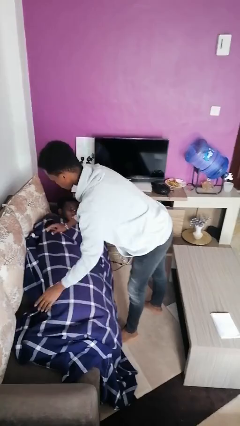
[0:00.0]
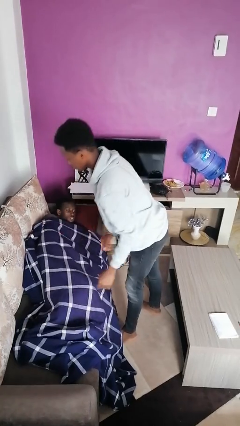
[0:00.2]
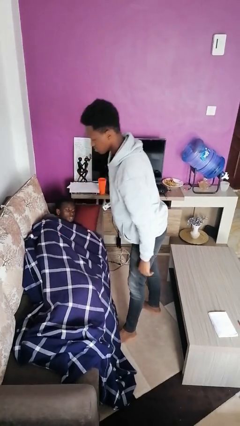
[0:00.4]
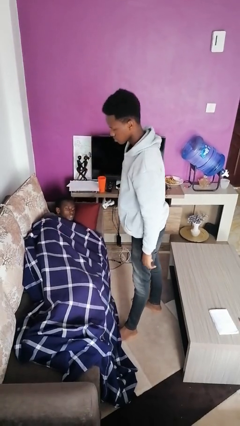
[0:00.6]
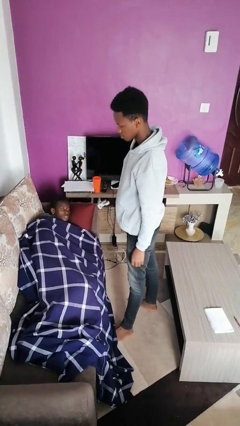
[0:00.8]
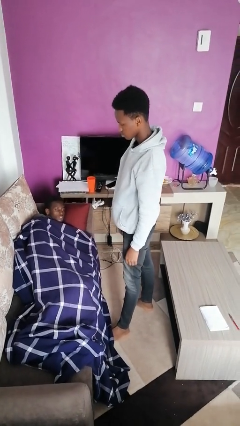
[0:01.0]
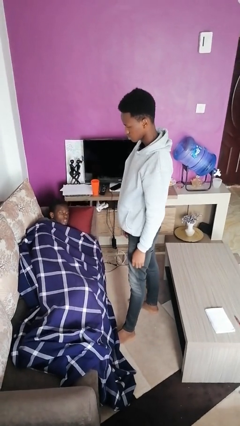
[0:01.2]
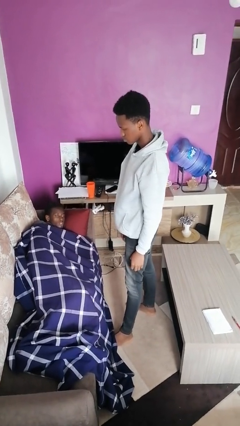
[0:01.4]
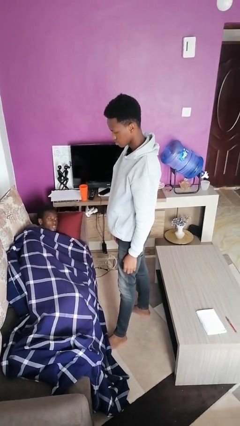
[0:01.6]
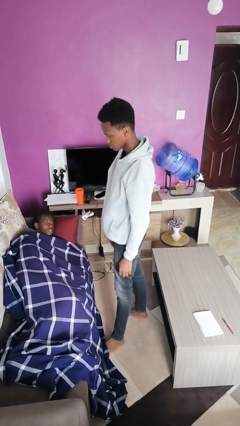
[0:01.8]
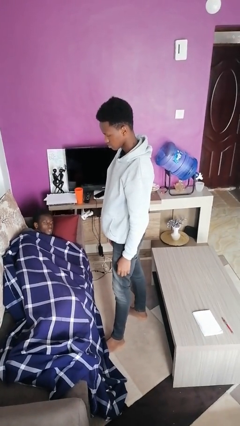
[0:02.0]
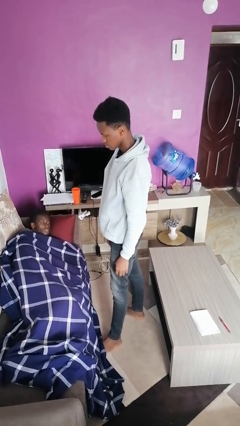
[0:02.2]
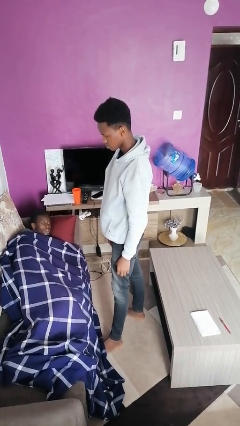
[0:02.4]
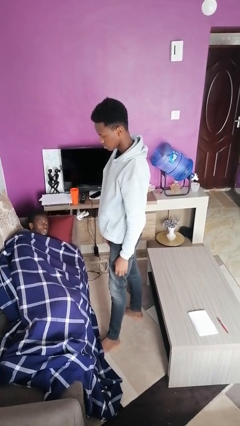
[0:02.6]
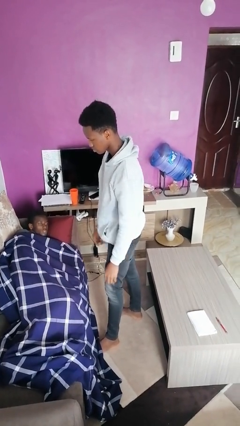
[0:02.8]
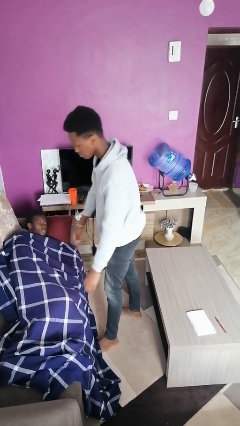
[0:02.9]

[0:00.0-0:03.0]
person covers friend with blanket

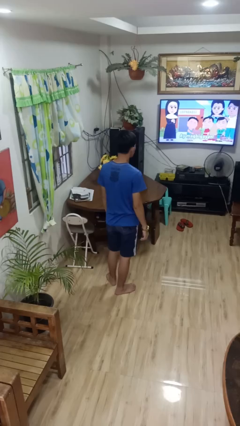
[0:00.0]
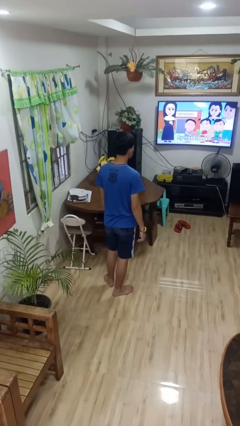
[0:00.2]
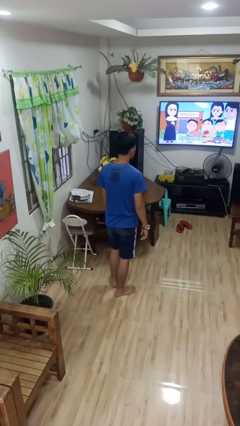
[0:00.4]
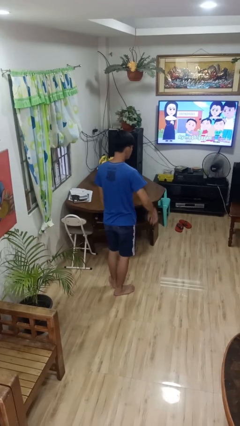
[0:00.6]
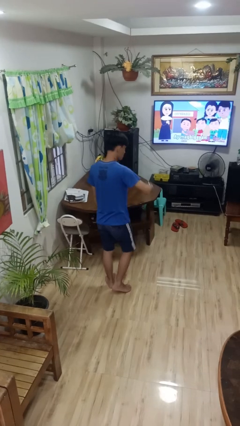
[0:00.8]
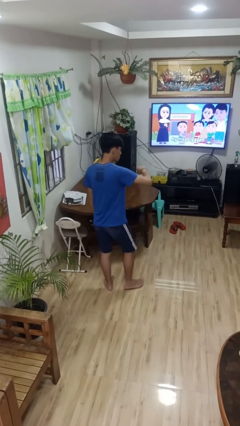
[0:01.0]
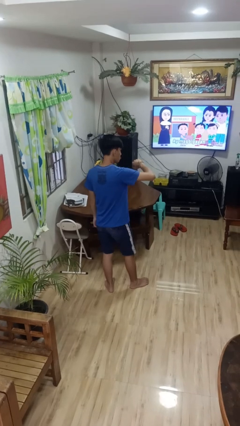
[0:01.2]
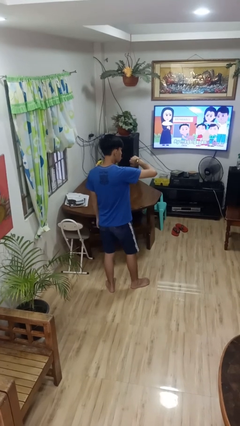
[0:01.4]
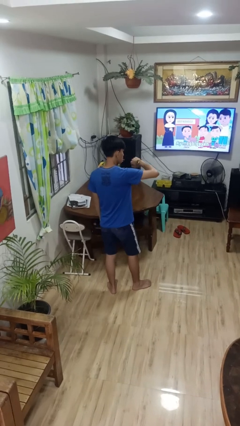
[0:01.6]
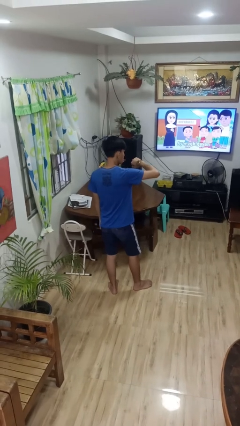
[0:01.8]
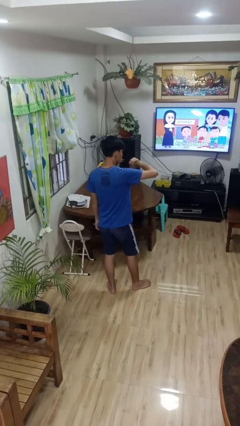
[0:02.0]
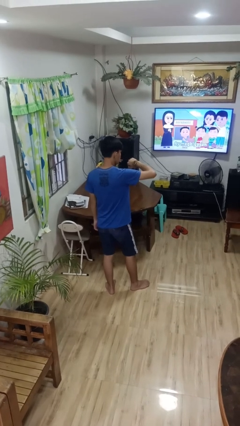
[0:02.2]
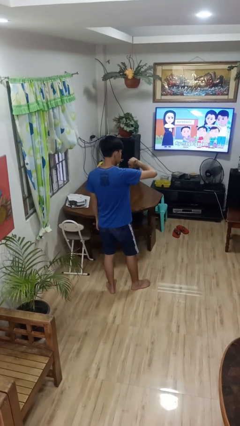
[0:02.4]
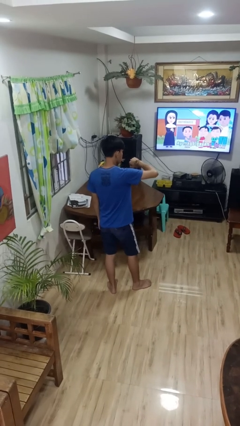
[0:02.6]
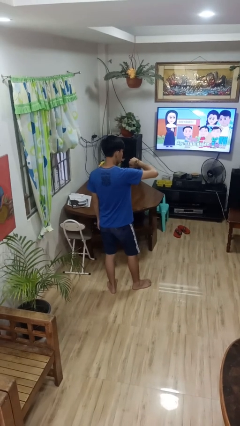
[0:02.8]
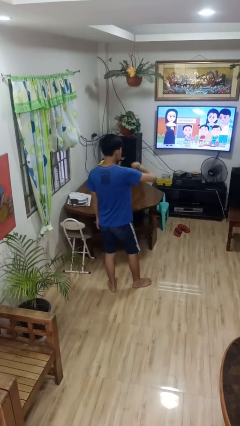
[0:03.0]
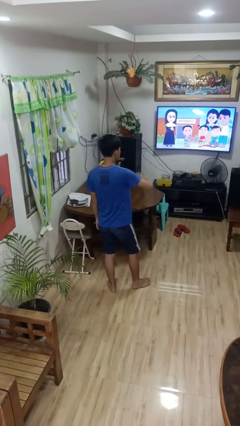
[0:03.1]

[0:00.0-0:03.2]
person looks at wristwatch

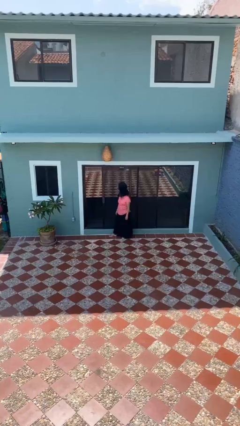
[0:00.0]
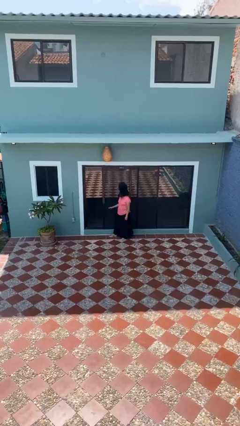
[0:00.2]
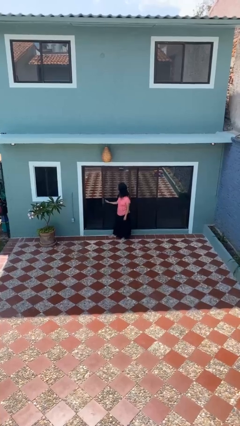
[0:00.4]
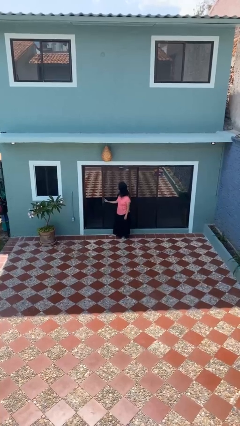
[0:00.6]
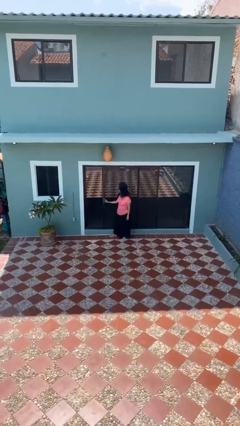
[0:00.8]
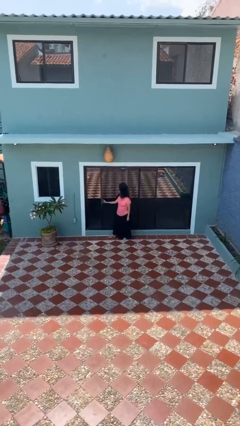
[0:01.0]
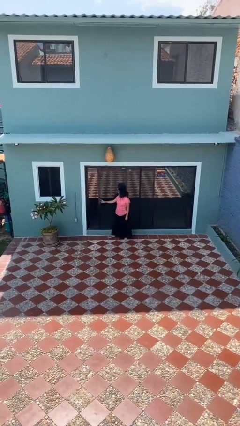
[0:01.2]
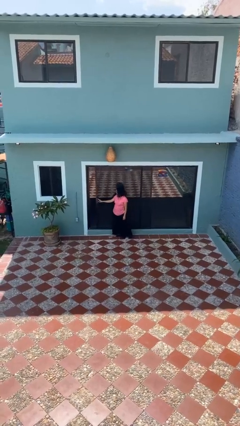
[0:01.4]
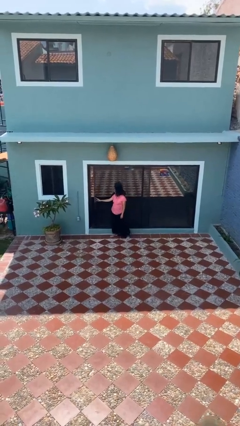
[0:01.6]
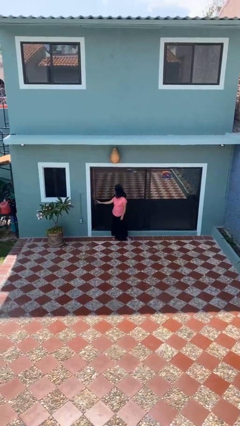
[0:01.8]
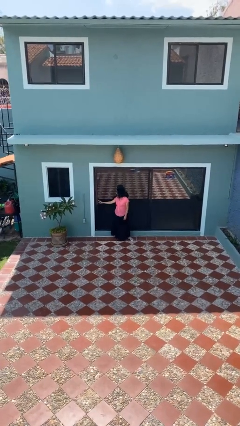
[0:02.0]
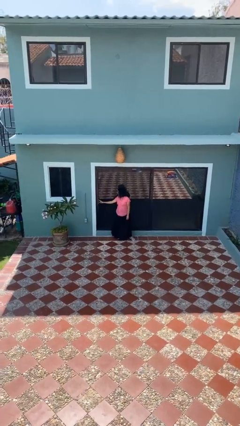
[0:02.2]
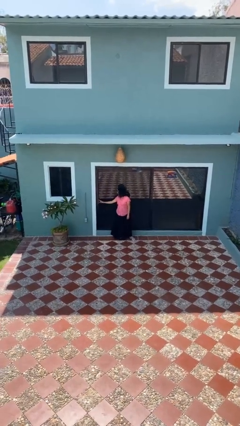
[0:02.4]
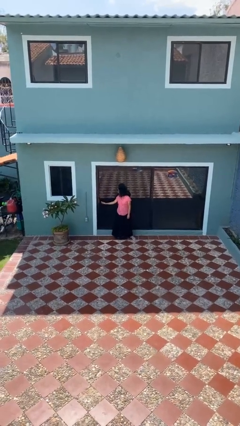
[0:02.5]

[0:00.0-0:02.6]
person closes sliding door

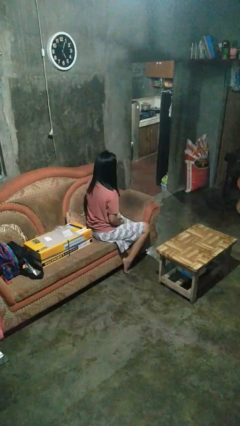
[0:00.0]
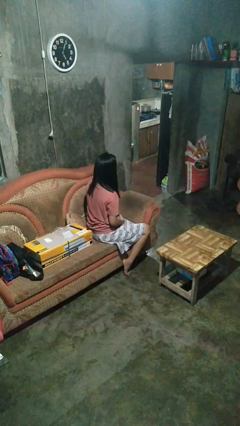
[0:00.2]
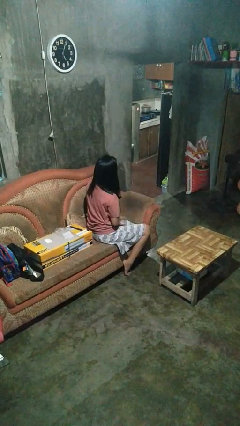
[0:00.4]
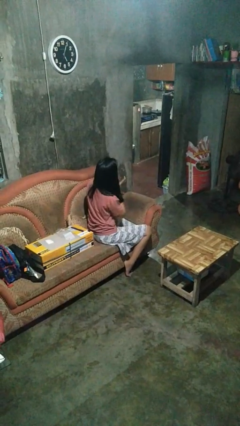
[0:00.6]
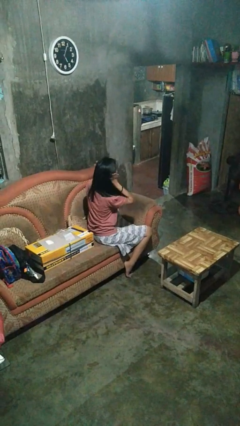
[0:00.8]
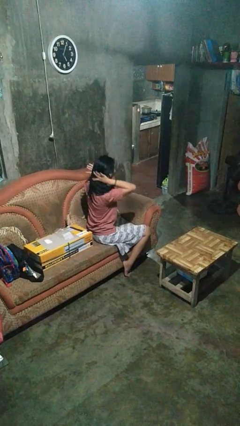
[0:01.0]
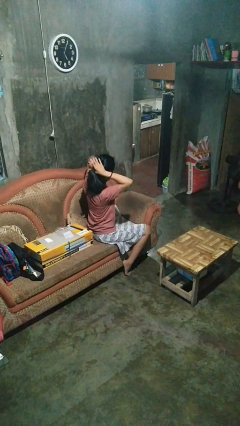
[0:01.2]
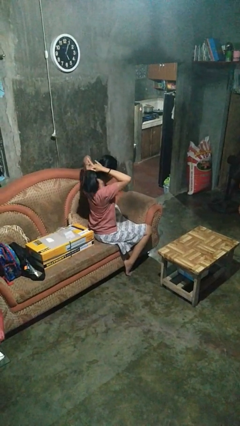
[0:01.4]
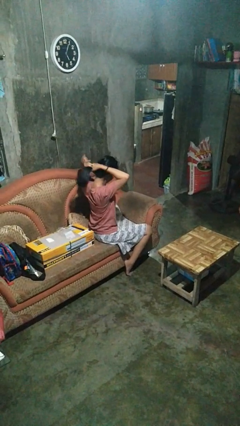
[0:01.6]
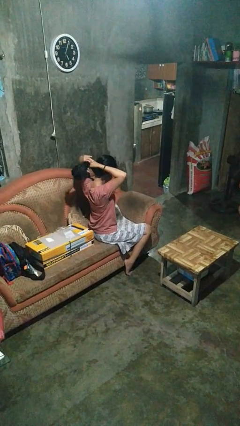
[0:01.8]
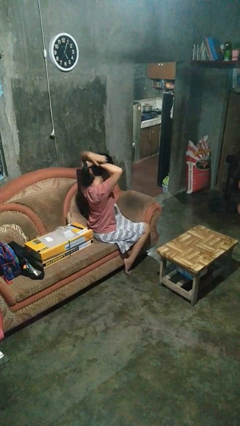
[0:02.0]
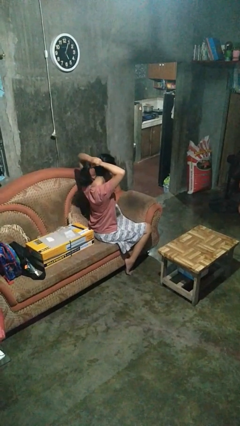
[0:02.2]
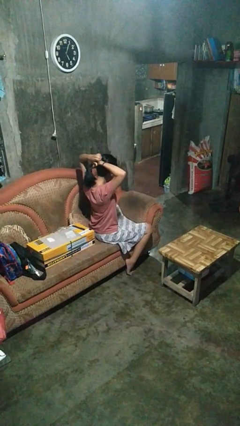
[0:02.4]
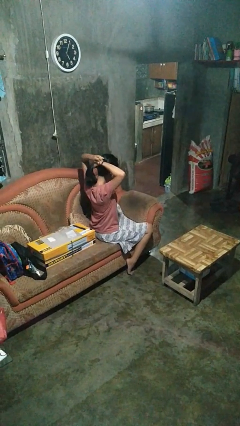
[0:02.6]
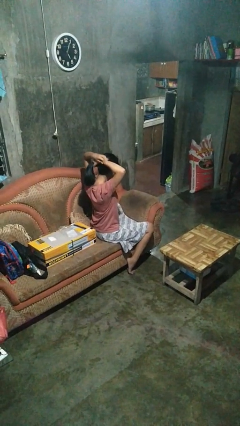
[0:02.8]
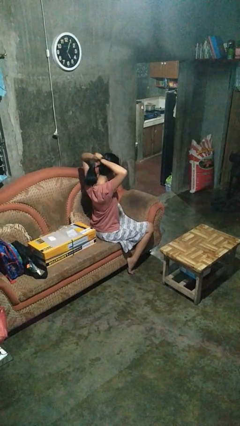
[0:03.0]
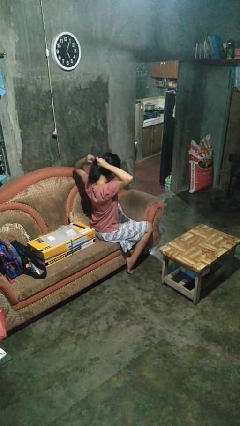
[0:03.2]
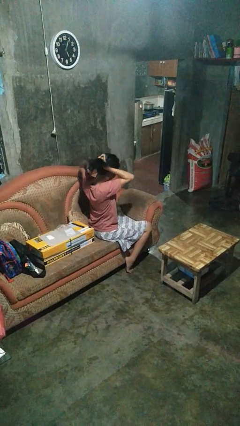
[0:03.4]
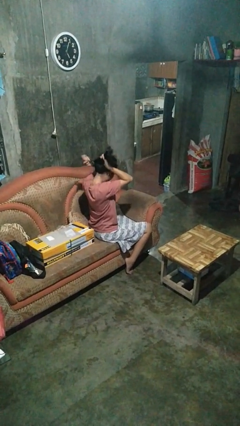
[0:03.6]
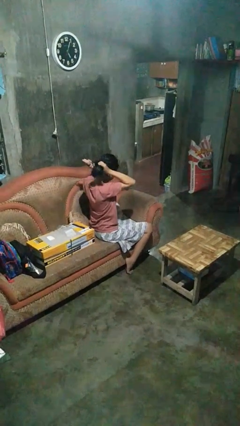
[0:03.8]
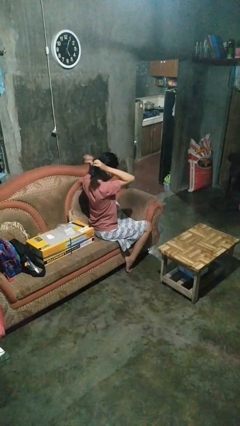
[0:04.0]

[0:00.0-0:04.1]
person puts hair in ponytail

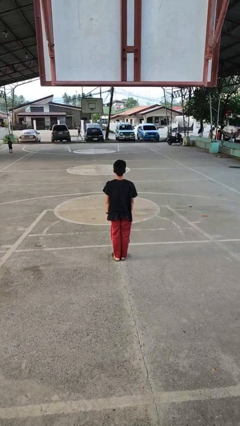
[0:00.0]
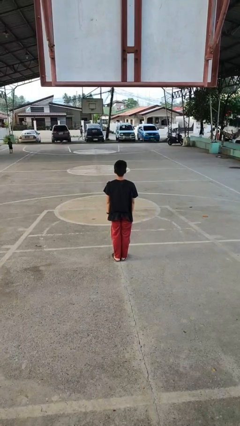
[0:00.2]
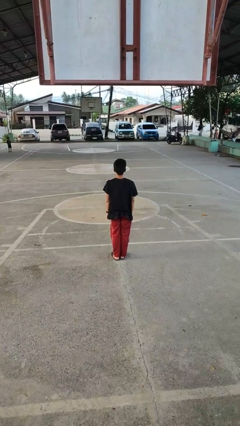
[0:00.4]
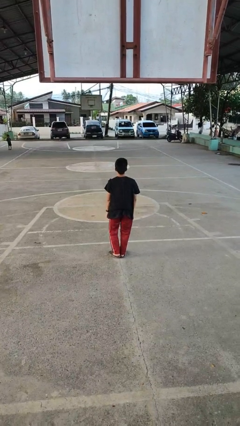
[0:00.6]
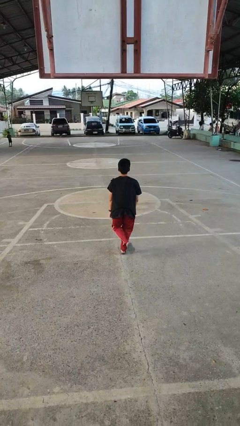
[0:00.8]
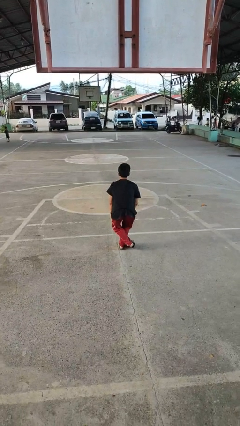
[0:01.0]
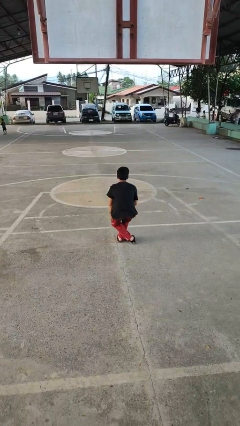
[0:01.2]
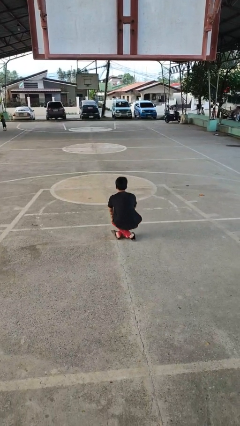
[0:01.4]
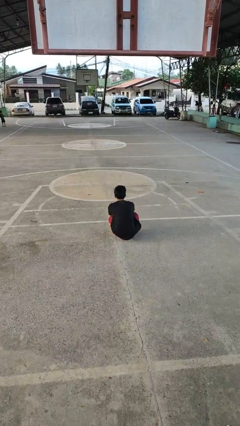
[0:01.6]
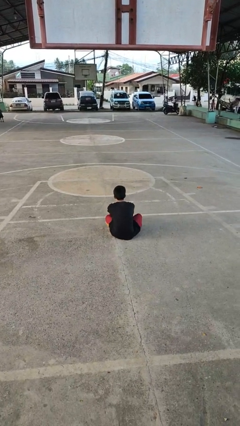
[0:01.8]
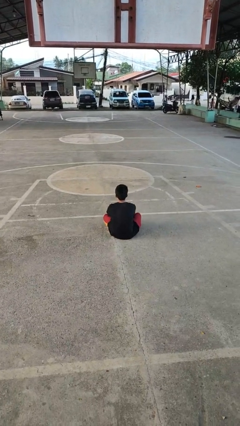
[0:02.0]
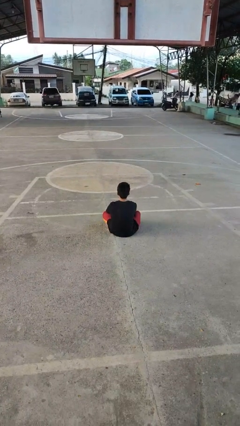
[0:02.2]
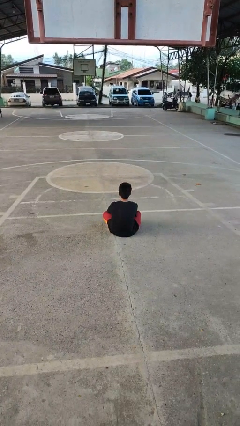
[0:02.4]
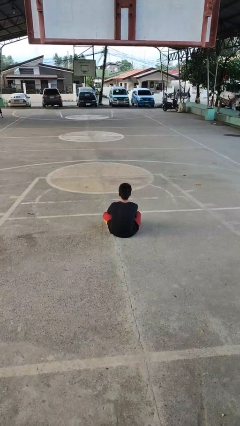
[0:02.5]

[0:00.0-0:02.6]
person sits crisscross

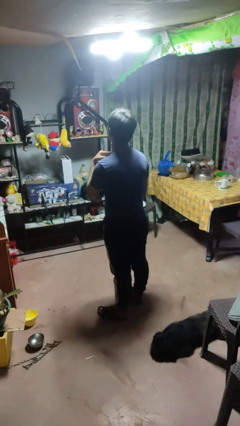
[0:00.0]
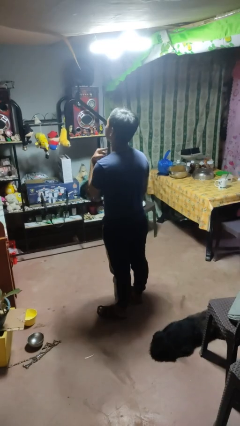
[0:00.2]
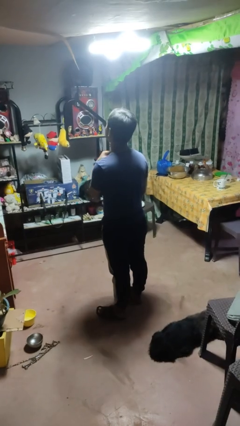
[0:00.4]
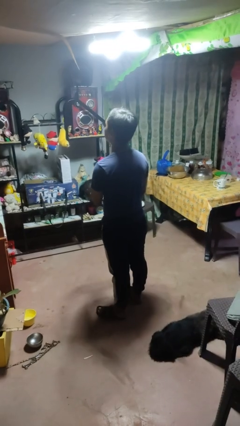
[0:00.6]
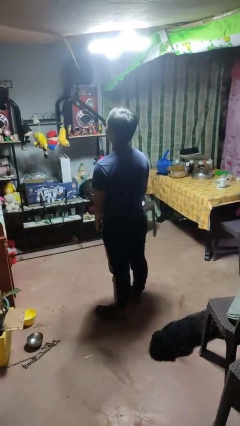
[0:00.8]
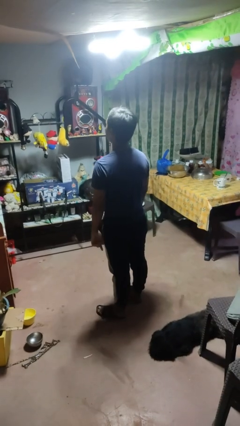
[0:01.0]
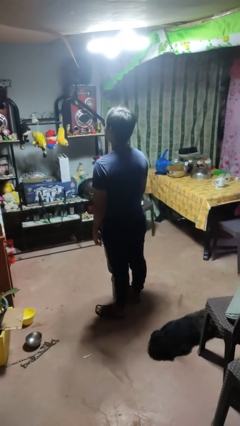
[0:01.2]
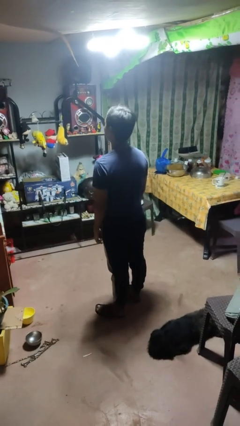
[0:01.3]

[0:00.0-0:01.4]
person gestures cut

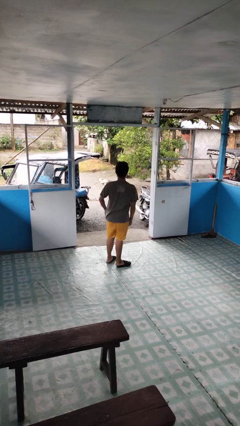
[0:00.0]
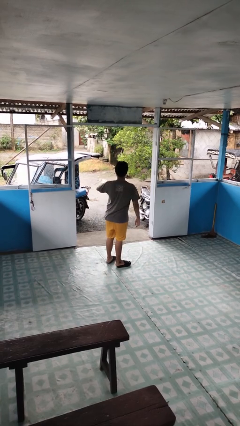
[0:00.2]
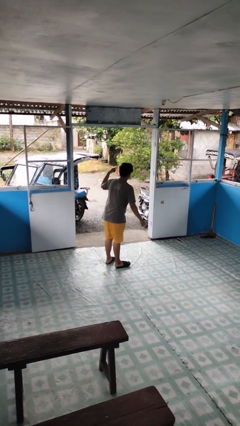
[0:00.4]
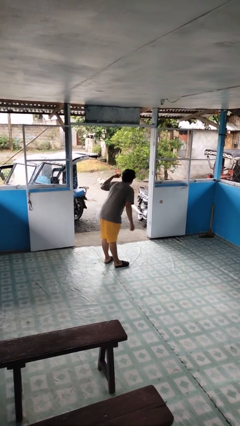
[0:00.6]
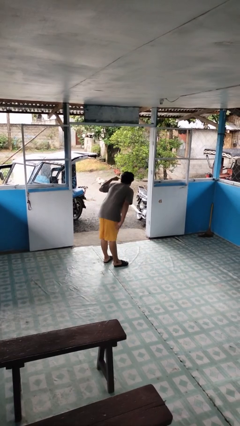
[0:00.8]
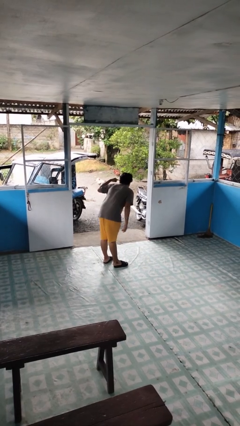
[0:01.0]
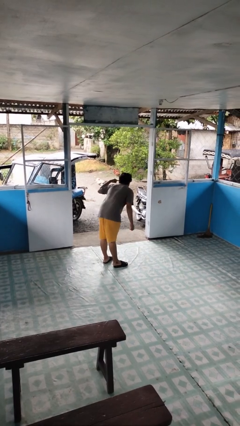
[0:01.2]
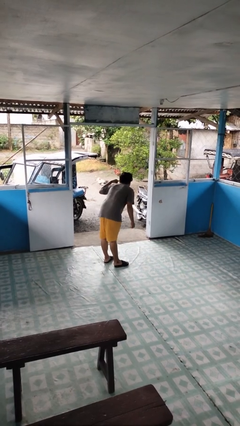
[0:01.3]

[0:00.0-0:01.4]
person gestures listen closely
